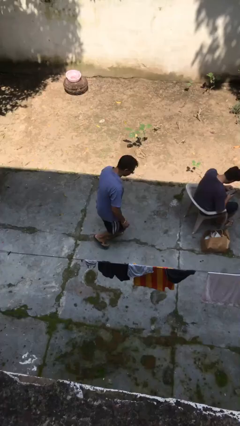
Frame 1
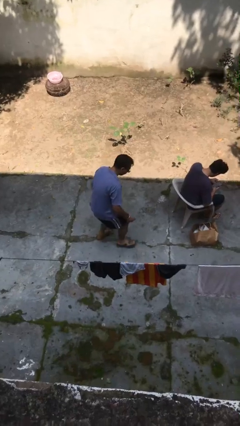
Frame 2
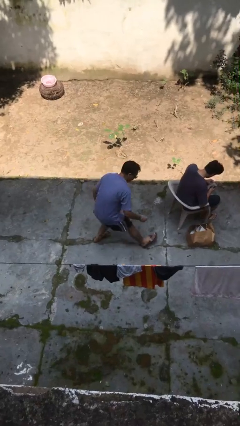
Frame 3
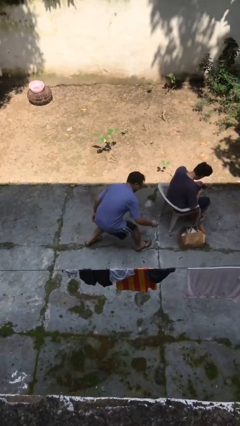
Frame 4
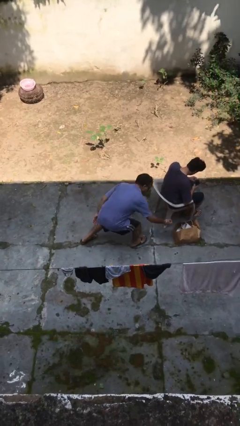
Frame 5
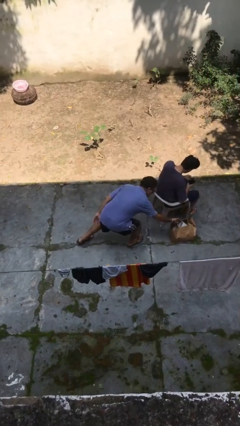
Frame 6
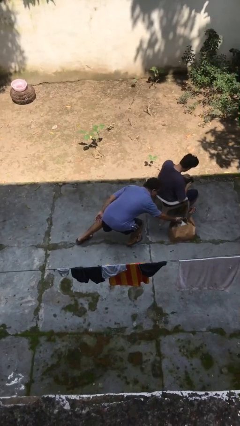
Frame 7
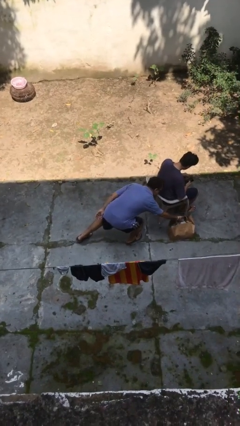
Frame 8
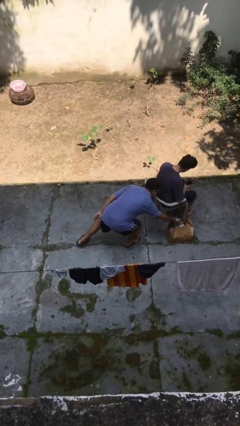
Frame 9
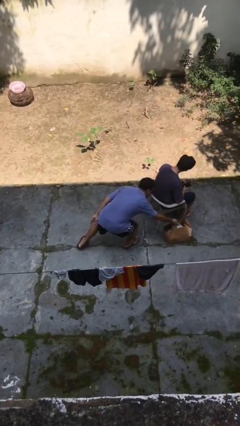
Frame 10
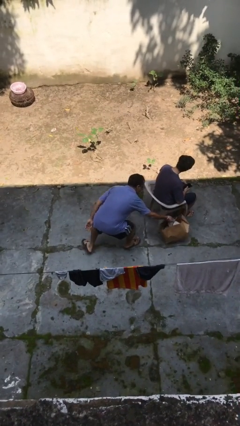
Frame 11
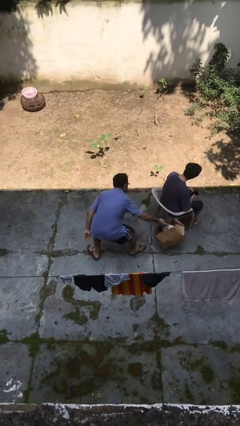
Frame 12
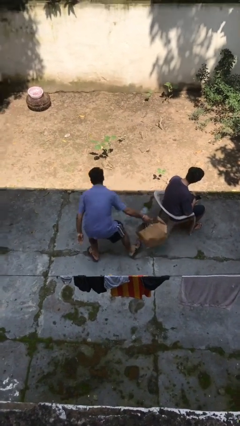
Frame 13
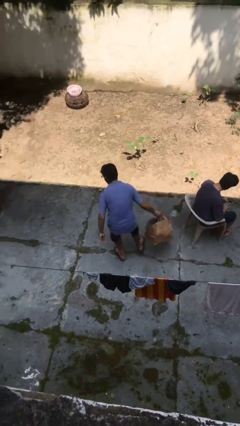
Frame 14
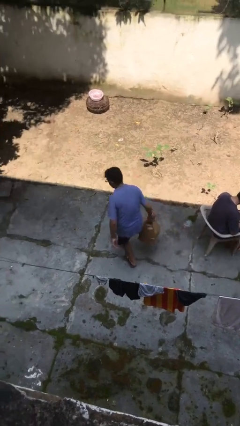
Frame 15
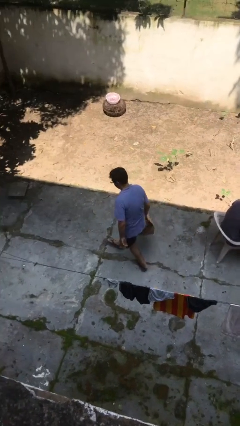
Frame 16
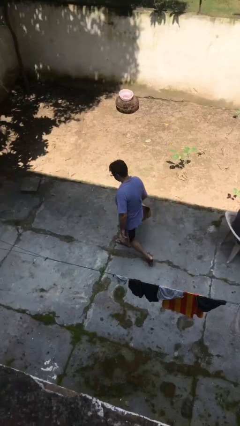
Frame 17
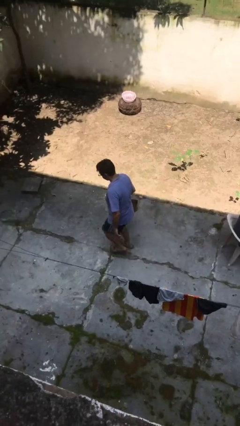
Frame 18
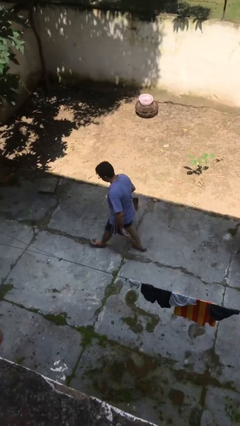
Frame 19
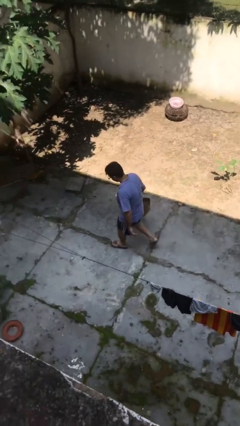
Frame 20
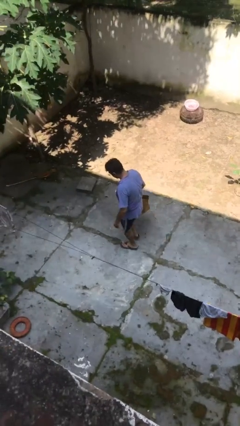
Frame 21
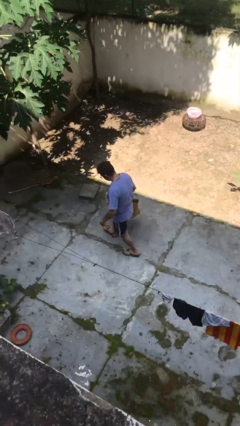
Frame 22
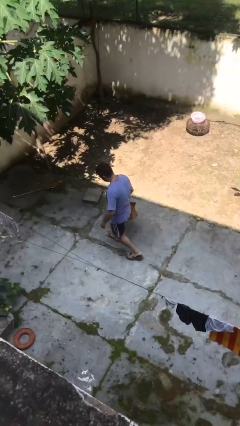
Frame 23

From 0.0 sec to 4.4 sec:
person steals object from person

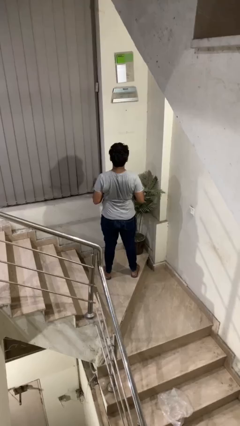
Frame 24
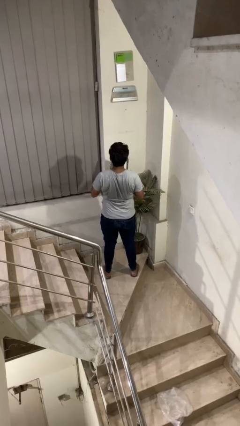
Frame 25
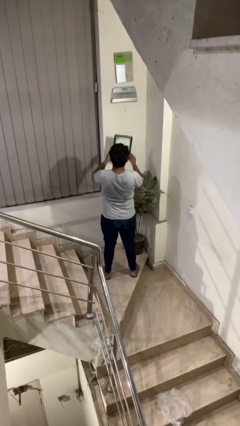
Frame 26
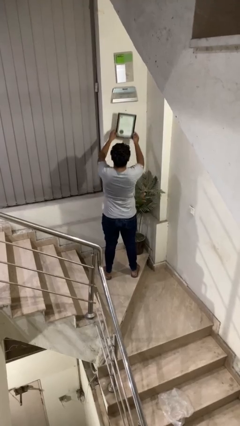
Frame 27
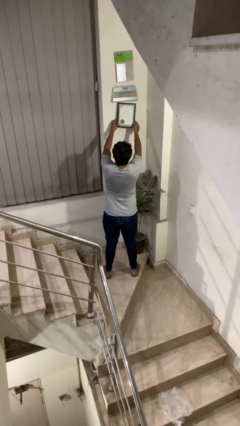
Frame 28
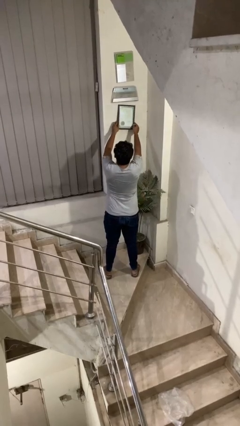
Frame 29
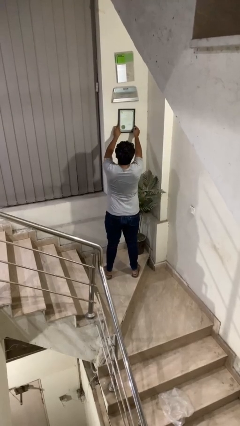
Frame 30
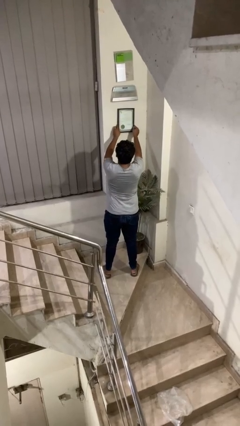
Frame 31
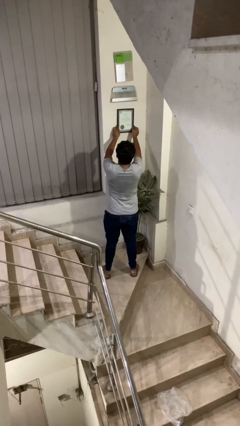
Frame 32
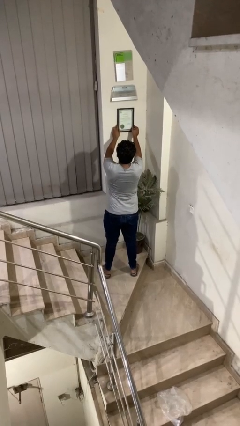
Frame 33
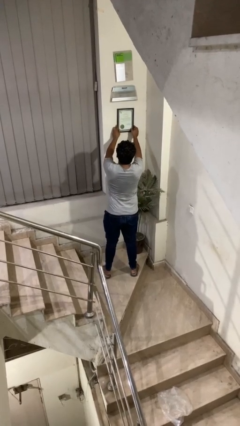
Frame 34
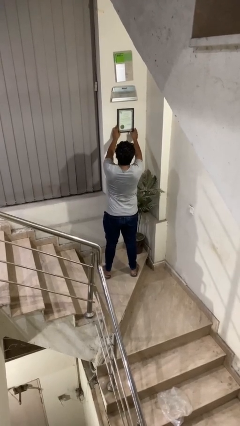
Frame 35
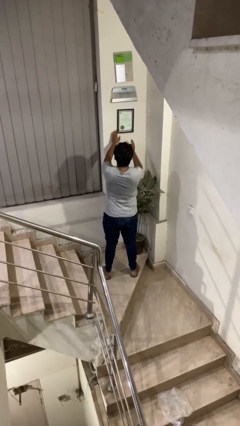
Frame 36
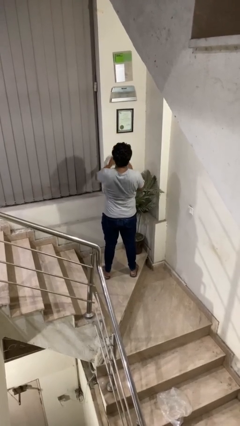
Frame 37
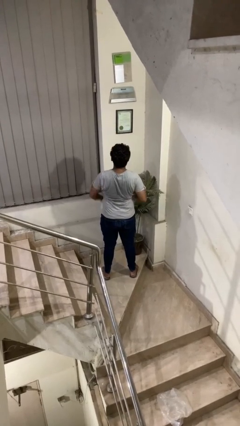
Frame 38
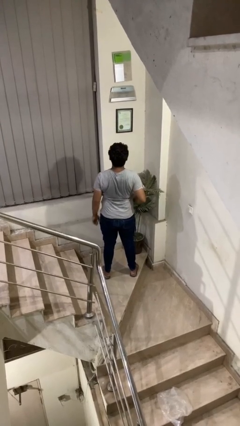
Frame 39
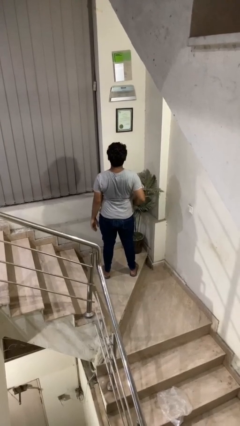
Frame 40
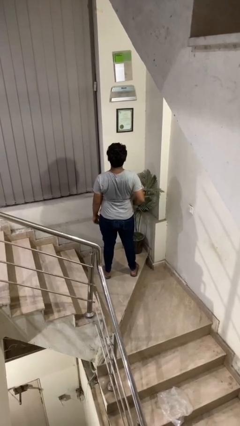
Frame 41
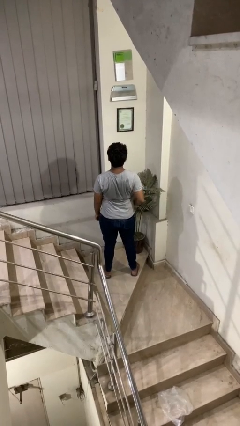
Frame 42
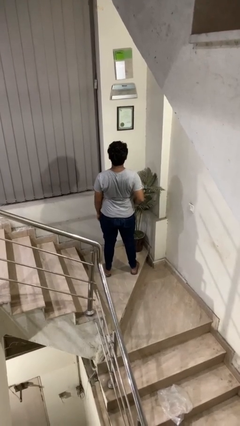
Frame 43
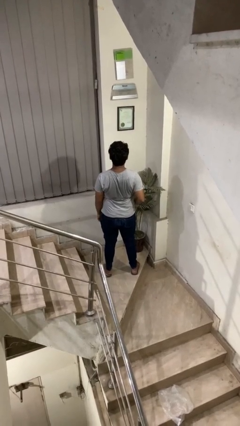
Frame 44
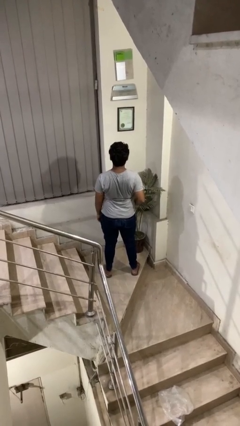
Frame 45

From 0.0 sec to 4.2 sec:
person puts up picture frame

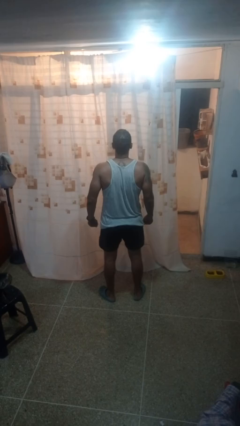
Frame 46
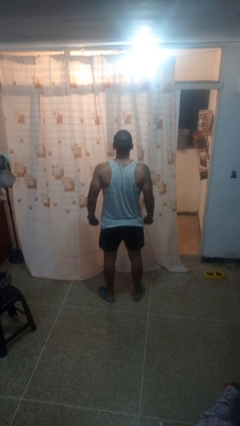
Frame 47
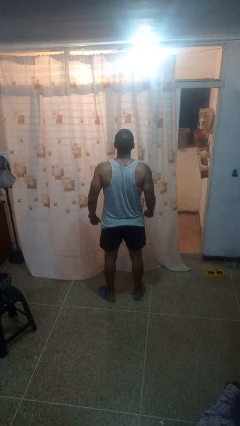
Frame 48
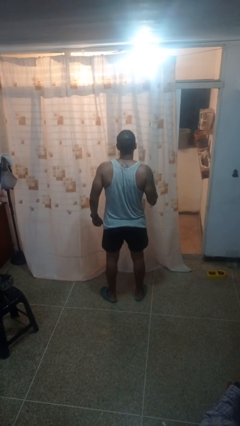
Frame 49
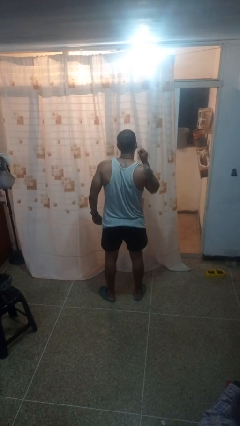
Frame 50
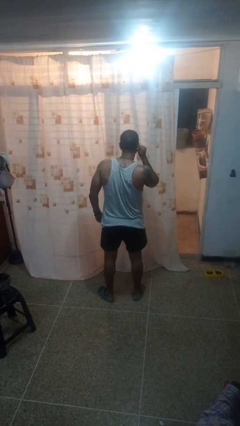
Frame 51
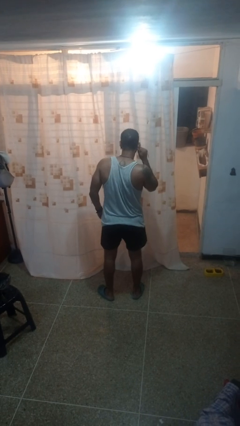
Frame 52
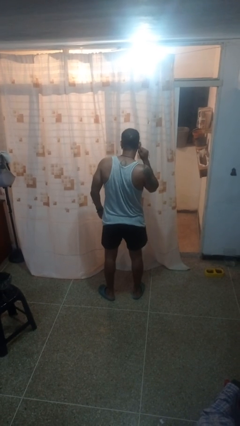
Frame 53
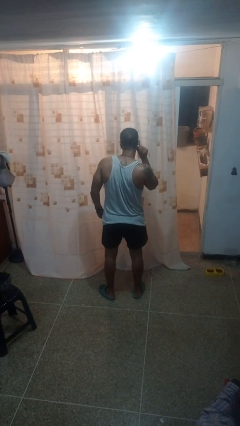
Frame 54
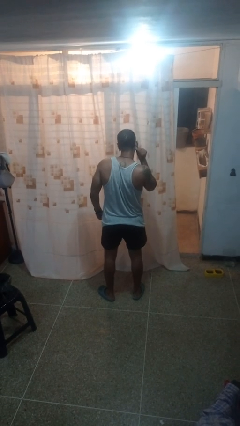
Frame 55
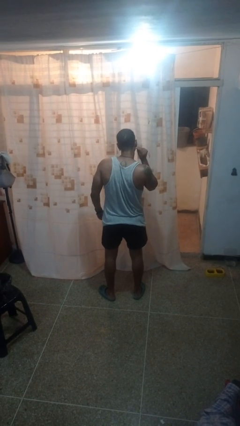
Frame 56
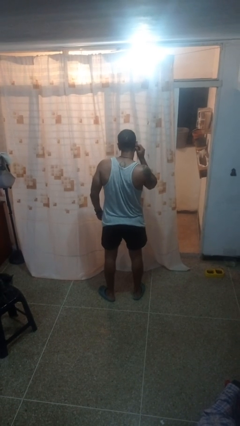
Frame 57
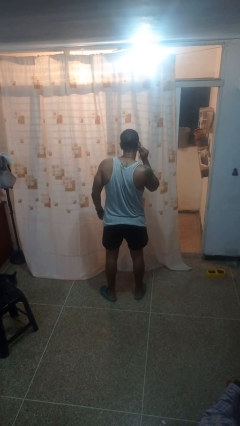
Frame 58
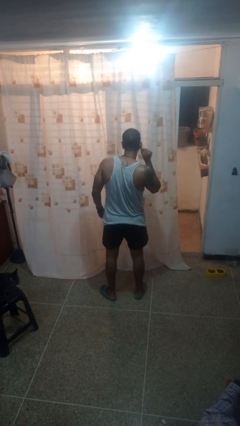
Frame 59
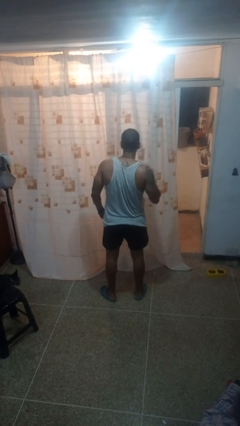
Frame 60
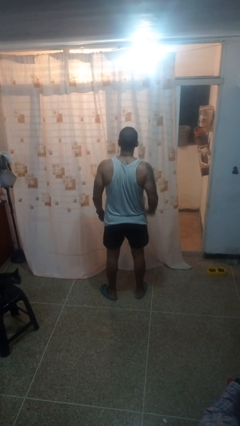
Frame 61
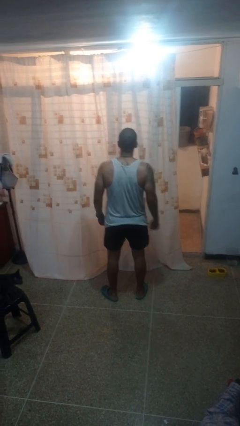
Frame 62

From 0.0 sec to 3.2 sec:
person touches earlobe

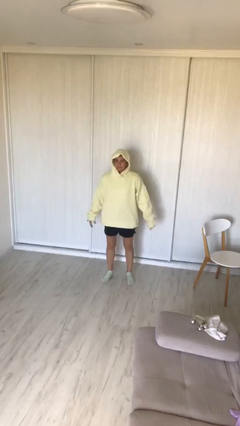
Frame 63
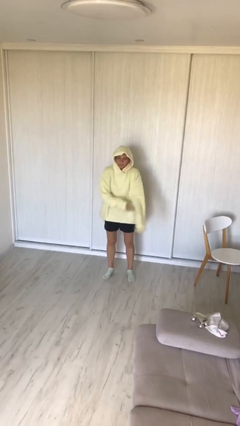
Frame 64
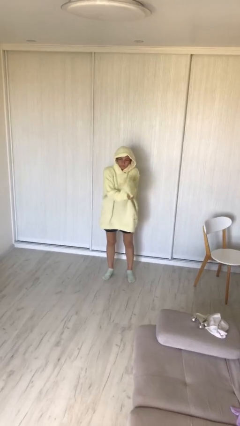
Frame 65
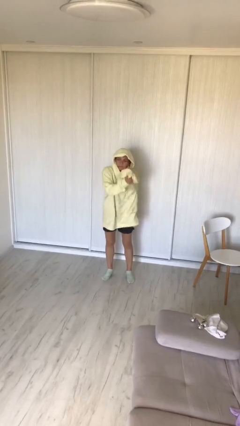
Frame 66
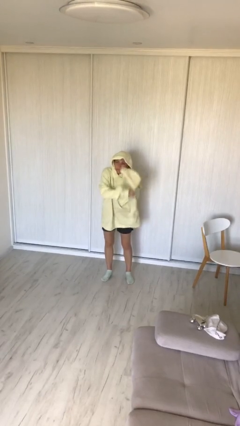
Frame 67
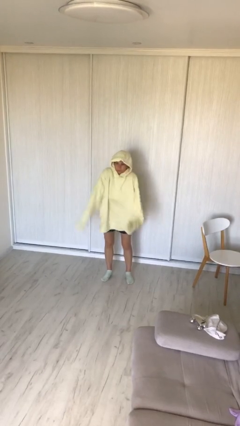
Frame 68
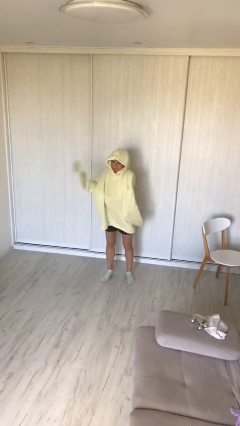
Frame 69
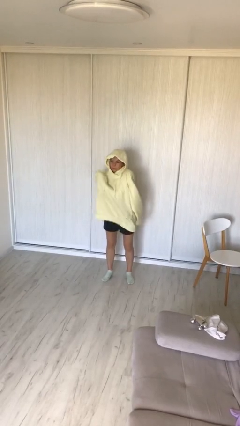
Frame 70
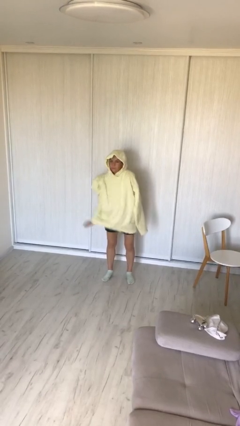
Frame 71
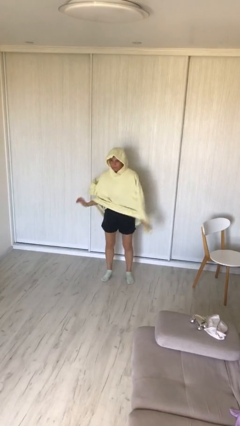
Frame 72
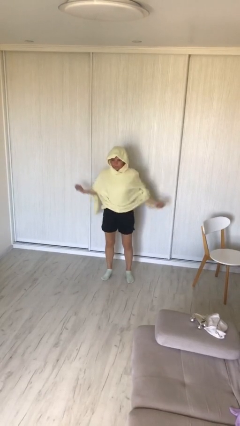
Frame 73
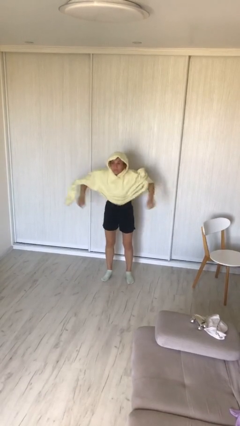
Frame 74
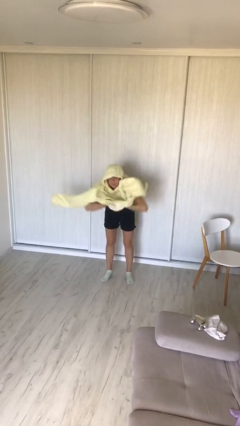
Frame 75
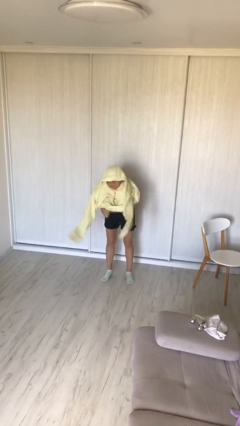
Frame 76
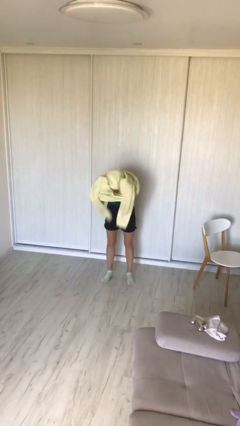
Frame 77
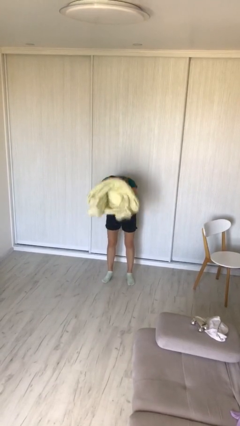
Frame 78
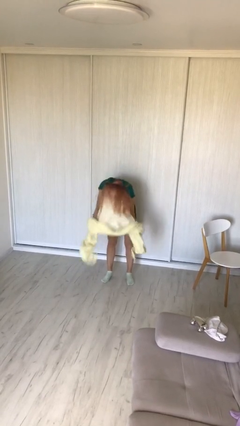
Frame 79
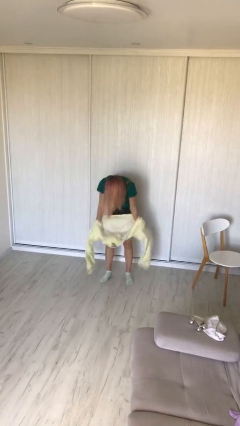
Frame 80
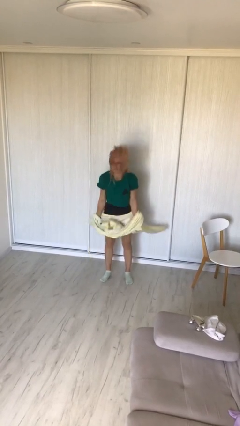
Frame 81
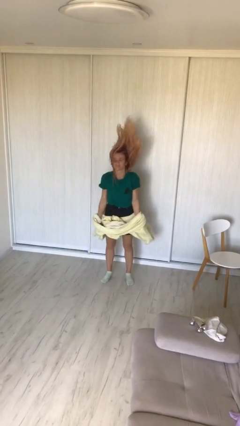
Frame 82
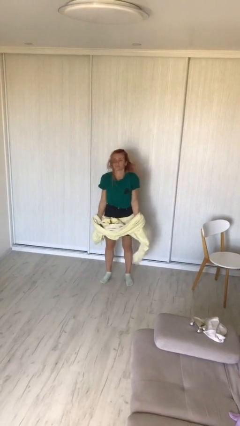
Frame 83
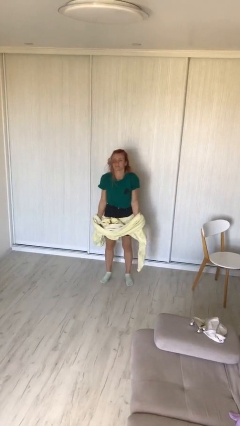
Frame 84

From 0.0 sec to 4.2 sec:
person takes off hoodie

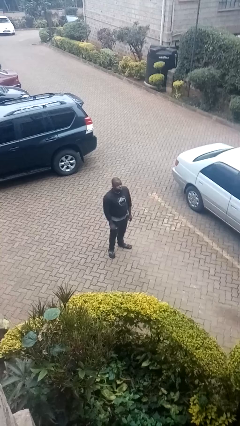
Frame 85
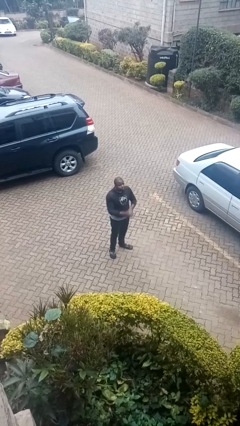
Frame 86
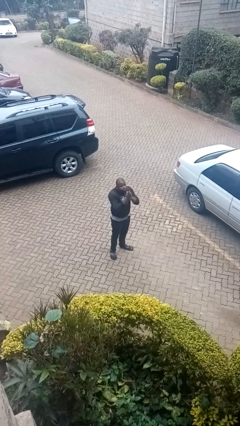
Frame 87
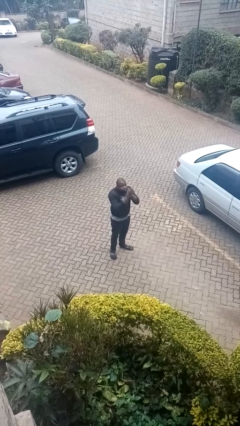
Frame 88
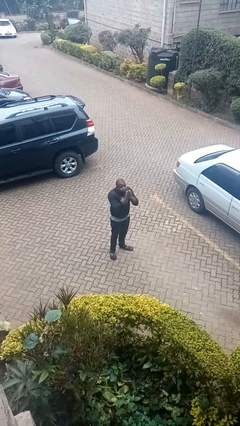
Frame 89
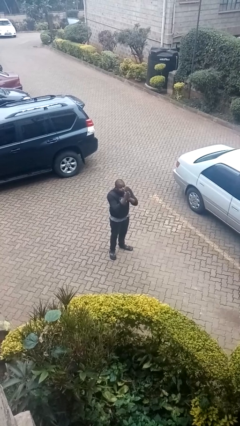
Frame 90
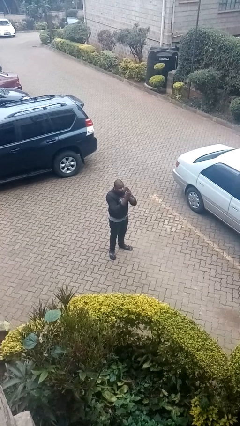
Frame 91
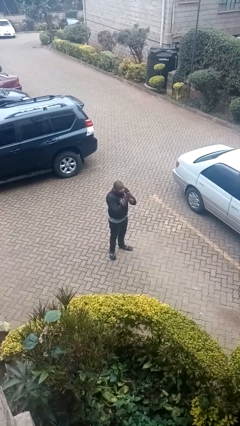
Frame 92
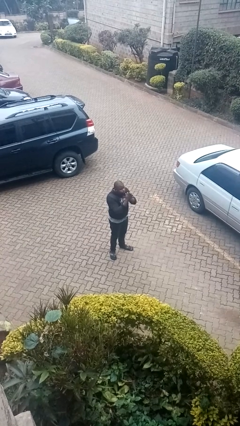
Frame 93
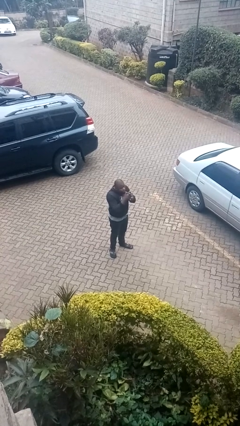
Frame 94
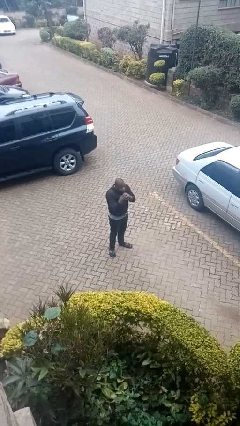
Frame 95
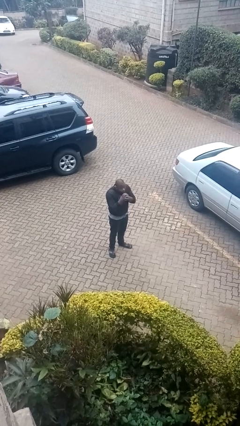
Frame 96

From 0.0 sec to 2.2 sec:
person blows into hands
